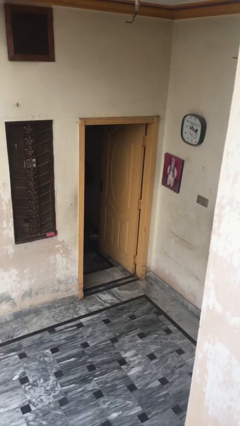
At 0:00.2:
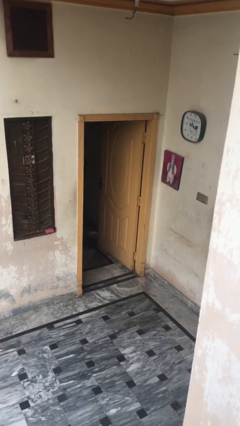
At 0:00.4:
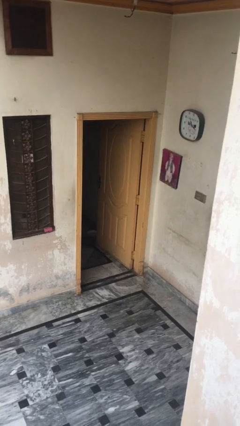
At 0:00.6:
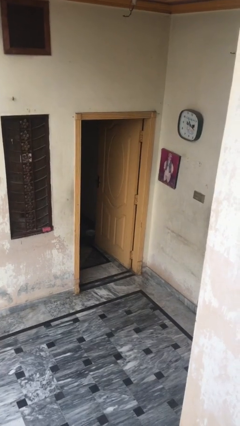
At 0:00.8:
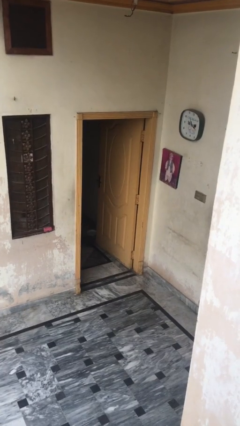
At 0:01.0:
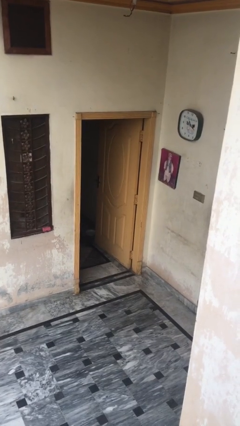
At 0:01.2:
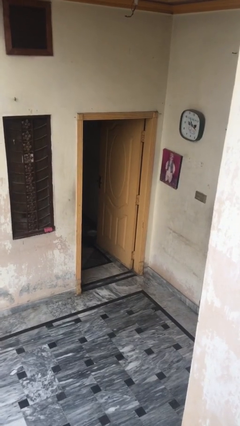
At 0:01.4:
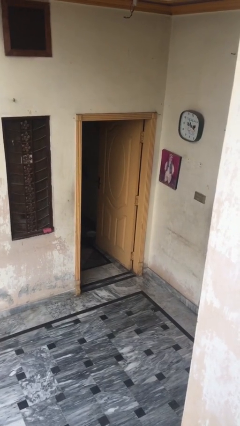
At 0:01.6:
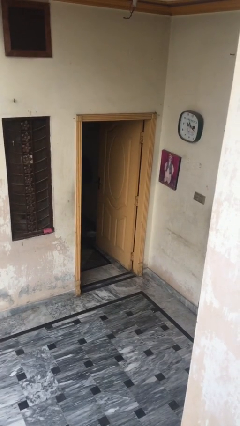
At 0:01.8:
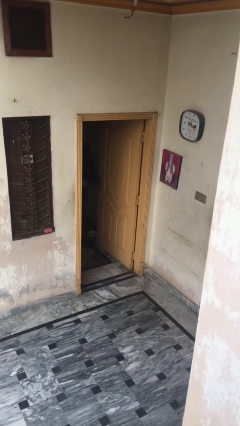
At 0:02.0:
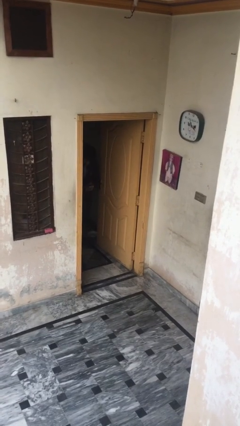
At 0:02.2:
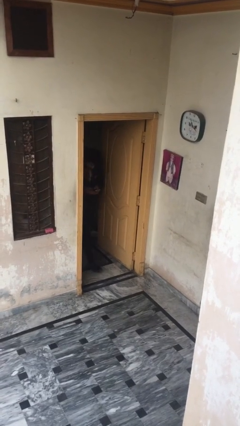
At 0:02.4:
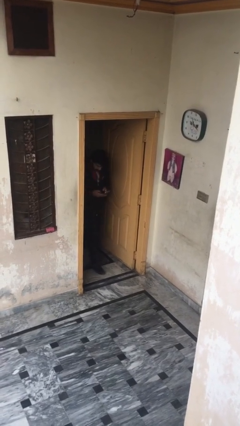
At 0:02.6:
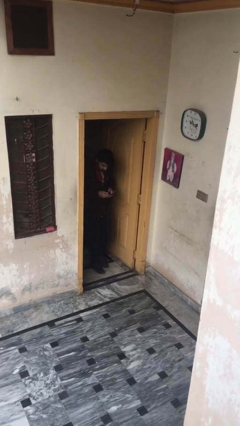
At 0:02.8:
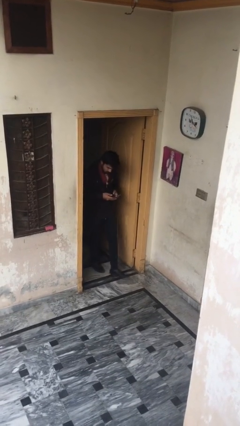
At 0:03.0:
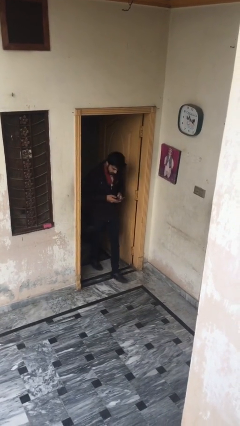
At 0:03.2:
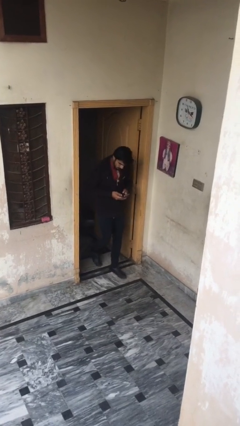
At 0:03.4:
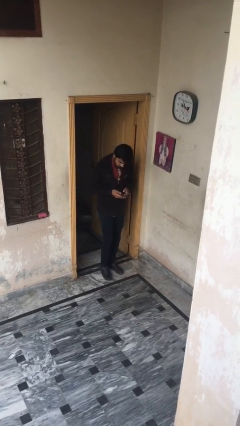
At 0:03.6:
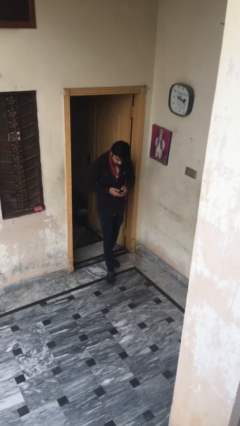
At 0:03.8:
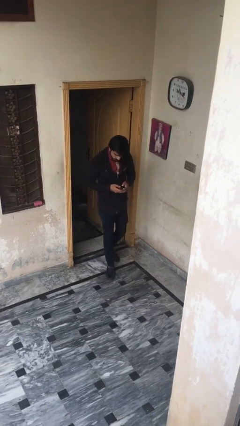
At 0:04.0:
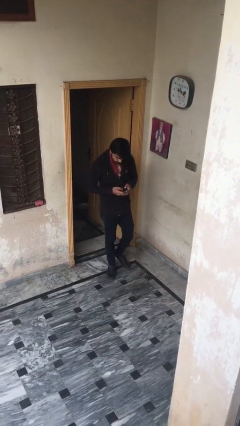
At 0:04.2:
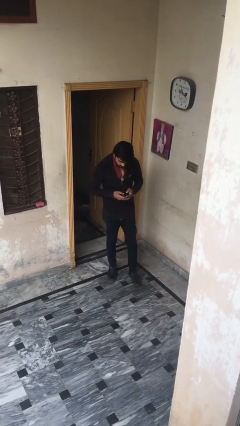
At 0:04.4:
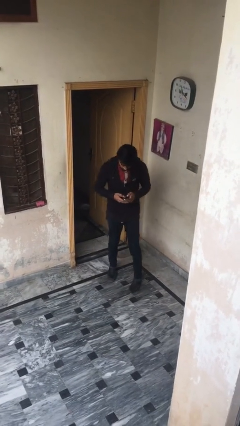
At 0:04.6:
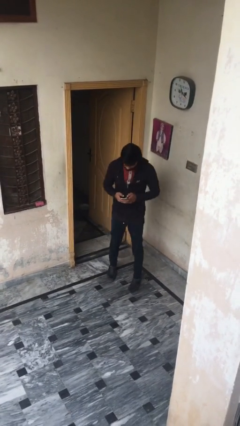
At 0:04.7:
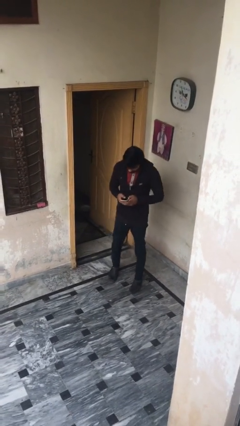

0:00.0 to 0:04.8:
person enters scene through structure

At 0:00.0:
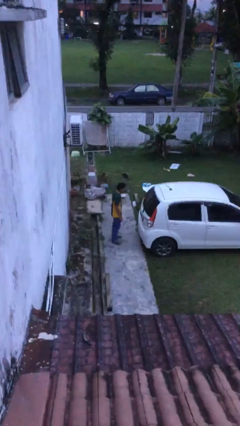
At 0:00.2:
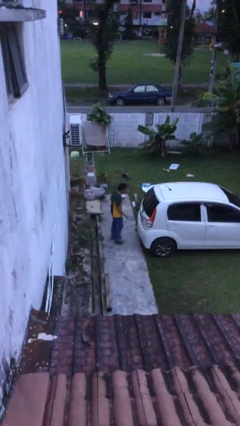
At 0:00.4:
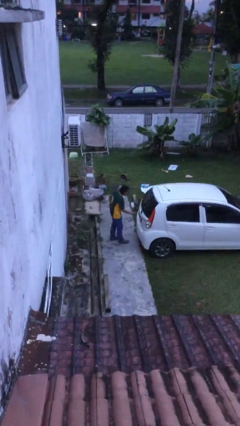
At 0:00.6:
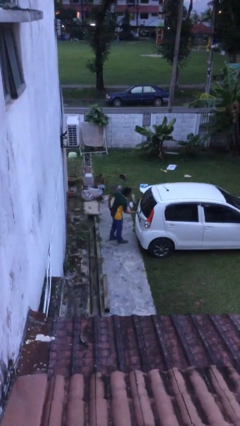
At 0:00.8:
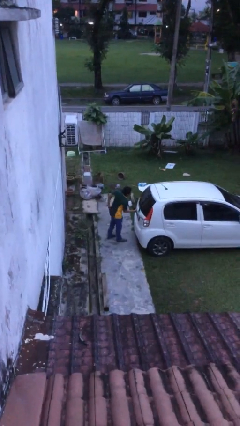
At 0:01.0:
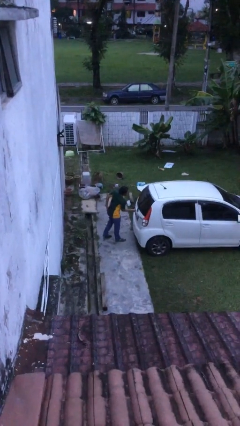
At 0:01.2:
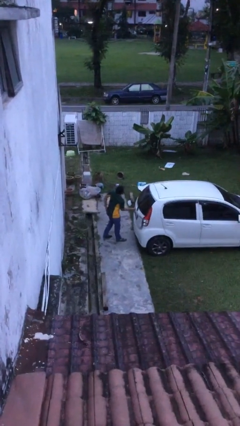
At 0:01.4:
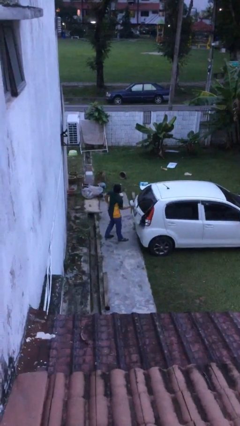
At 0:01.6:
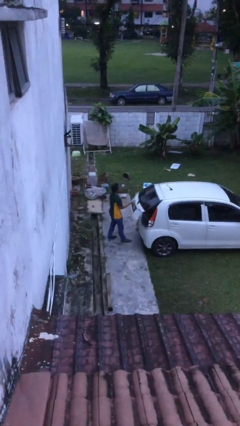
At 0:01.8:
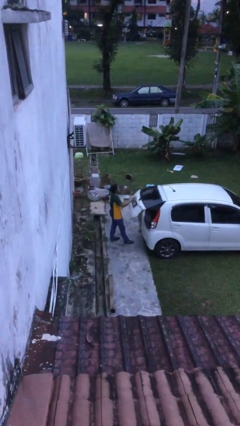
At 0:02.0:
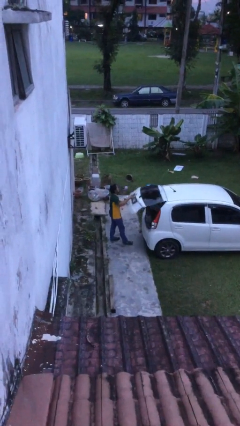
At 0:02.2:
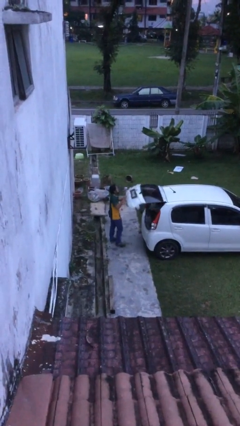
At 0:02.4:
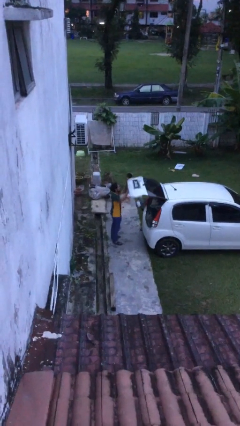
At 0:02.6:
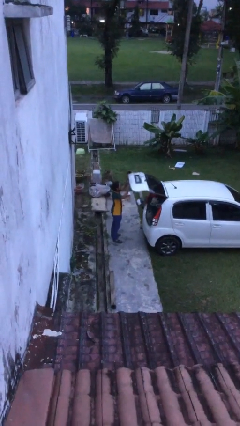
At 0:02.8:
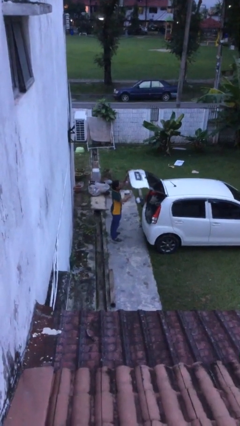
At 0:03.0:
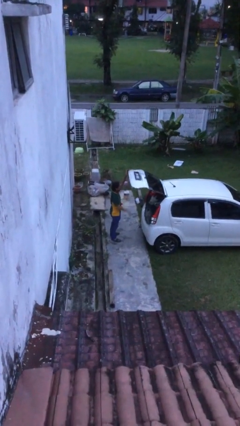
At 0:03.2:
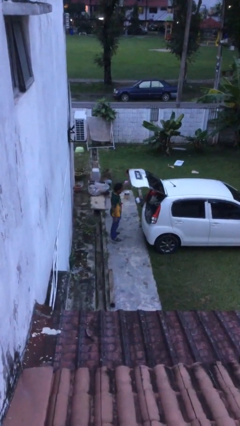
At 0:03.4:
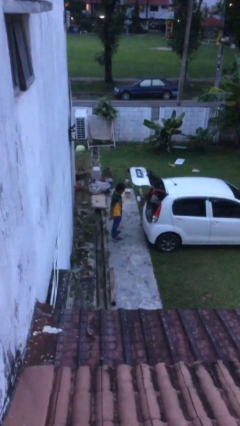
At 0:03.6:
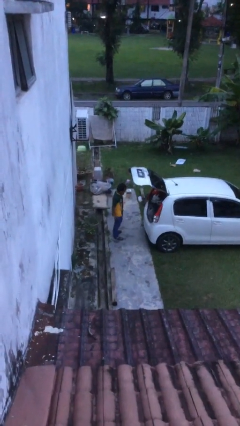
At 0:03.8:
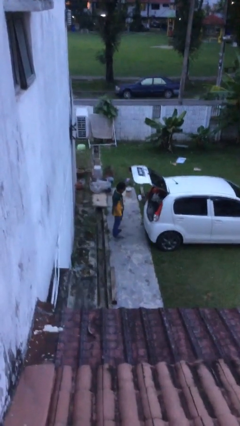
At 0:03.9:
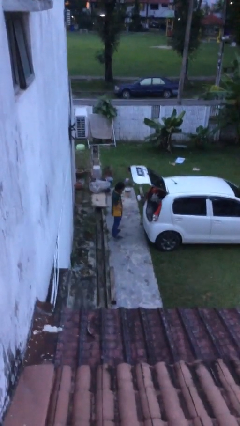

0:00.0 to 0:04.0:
person opens car trunk

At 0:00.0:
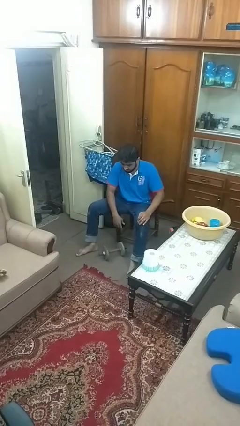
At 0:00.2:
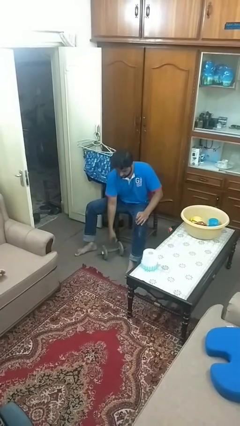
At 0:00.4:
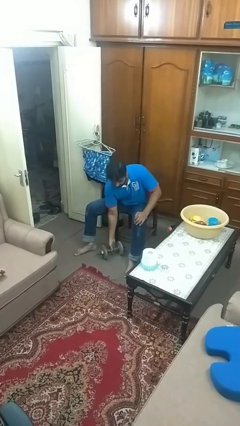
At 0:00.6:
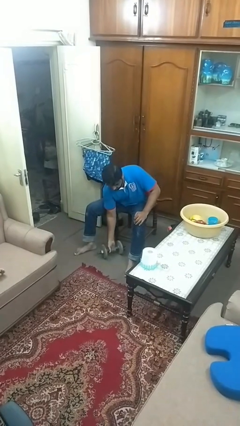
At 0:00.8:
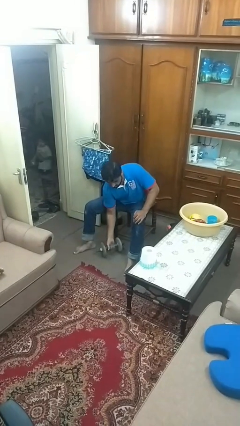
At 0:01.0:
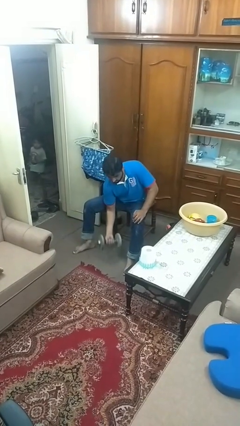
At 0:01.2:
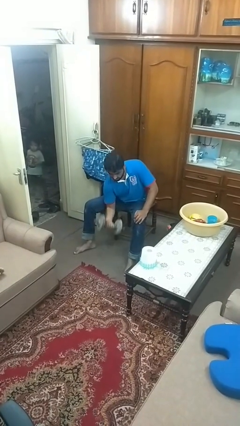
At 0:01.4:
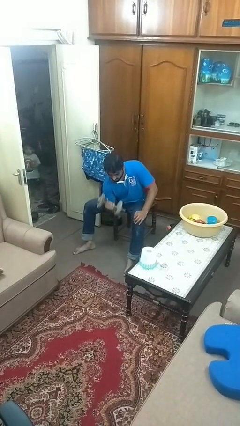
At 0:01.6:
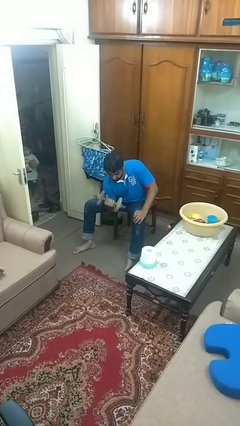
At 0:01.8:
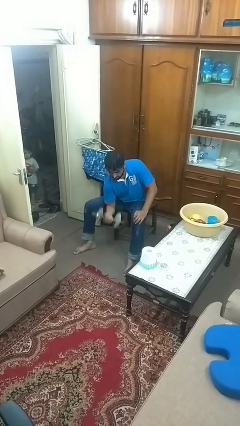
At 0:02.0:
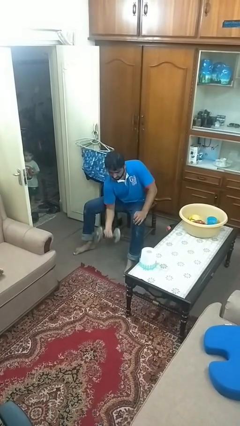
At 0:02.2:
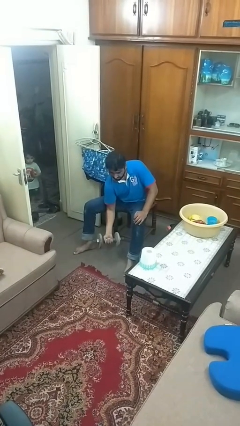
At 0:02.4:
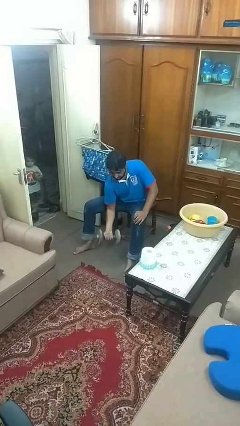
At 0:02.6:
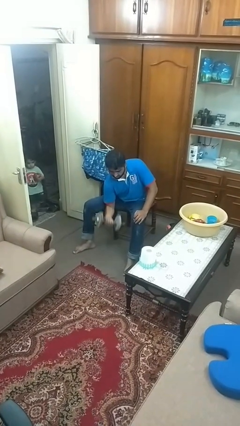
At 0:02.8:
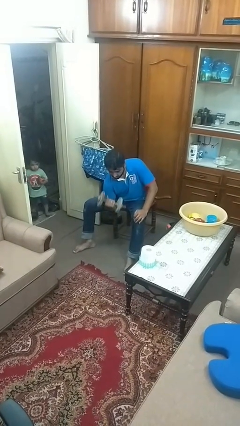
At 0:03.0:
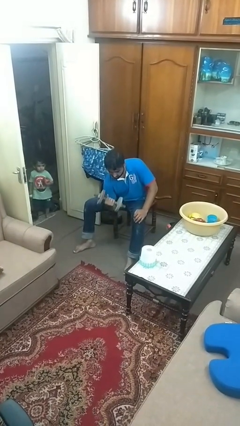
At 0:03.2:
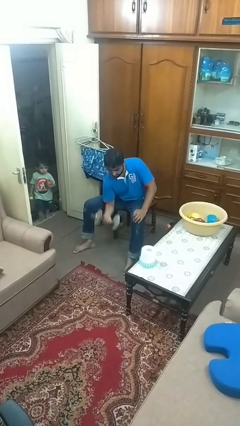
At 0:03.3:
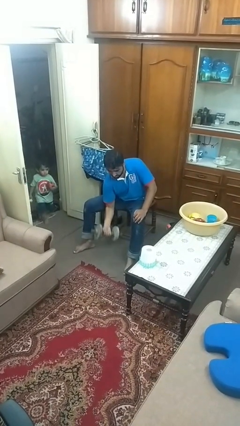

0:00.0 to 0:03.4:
person lifts dumbbells

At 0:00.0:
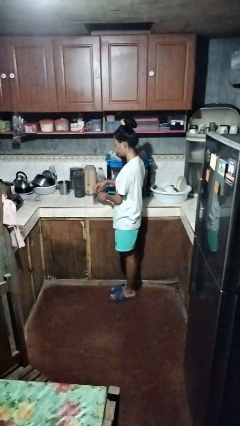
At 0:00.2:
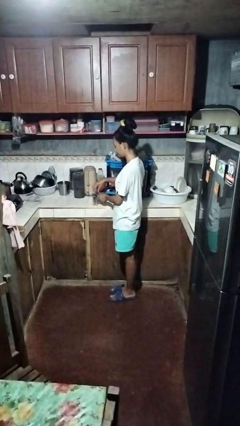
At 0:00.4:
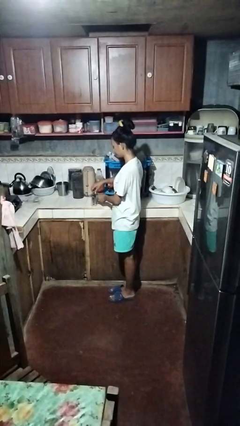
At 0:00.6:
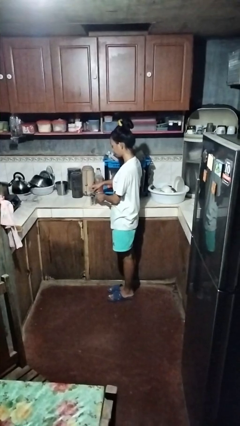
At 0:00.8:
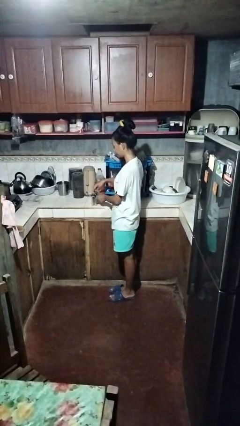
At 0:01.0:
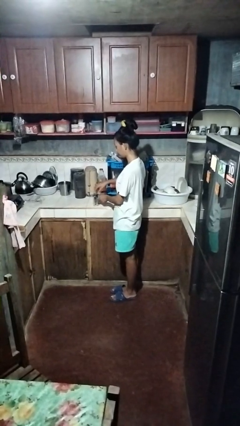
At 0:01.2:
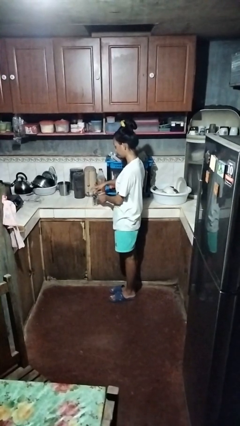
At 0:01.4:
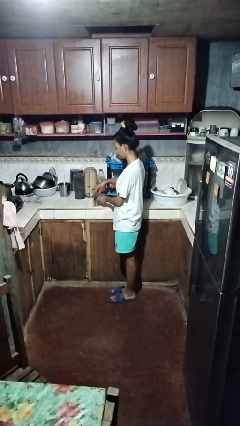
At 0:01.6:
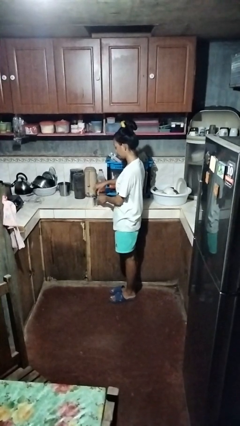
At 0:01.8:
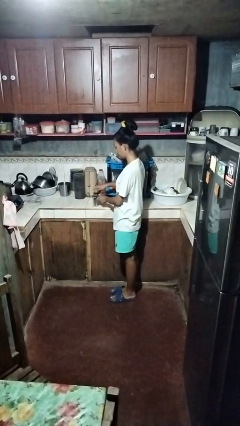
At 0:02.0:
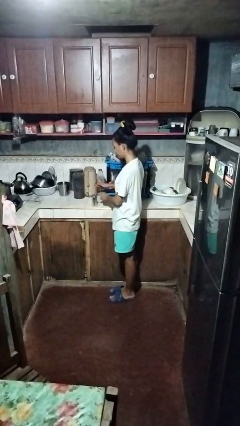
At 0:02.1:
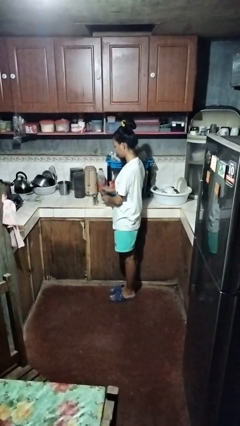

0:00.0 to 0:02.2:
person opens can with can opener

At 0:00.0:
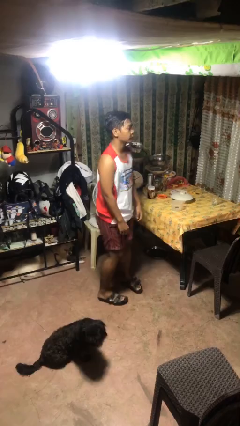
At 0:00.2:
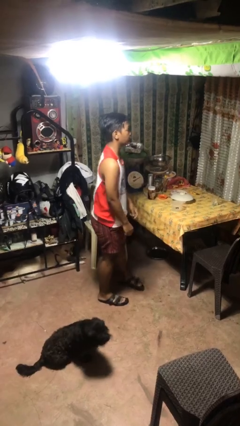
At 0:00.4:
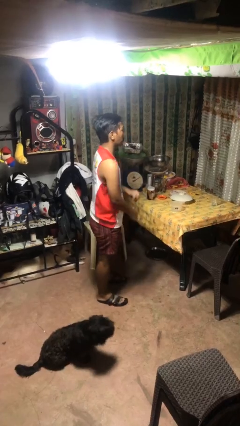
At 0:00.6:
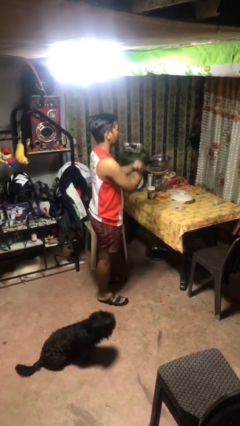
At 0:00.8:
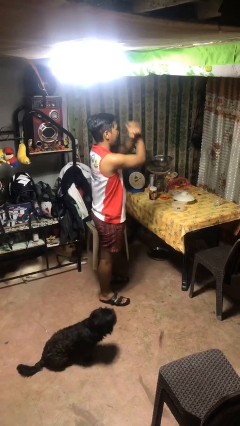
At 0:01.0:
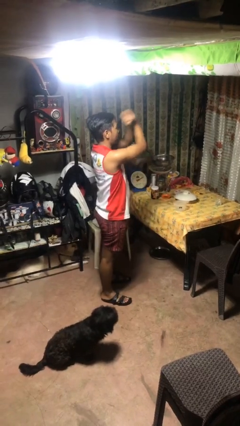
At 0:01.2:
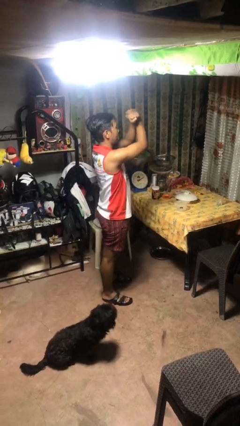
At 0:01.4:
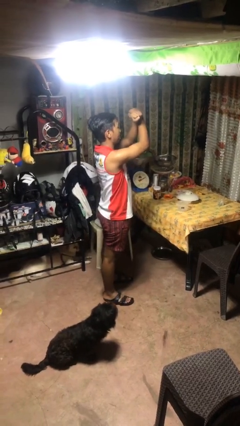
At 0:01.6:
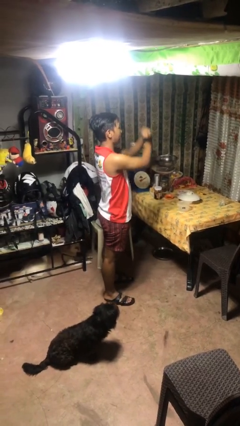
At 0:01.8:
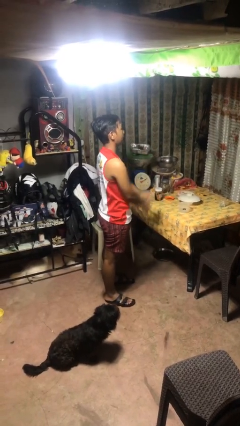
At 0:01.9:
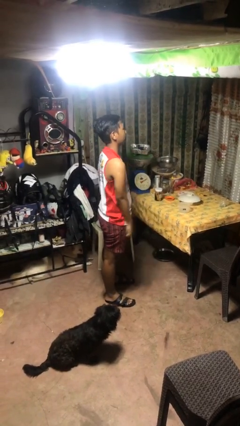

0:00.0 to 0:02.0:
person gestures arms x

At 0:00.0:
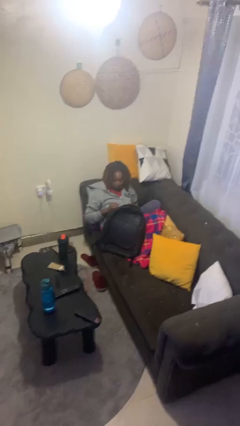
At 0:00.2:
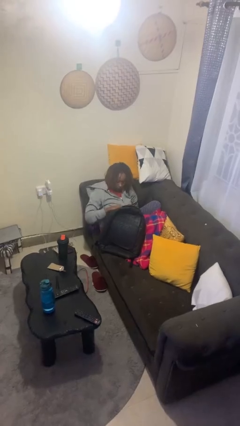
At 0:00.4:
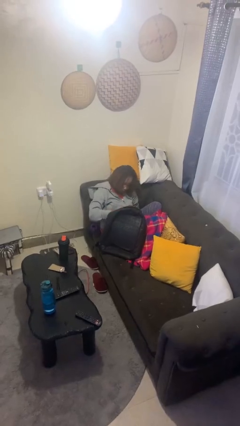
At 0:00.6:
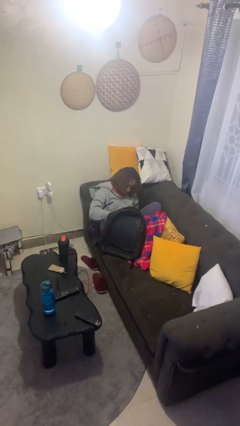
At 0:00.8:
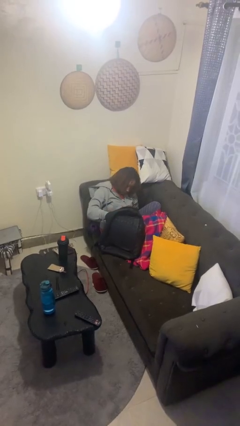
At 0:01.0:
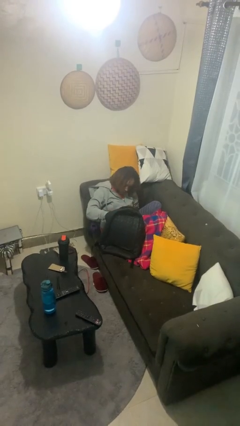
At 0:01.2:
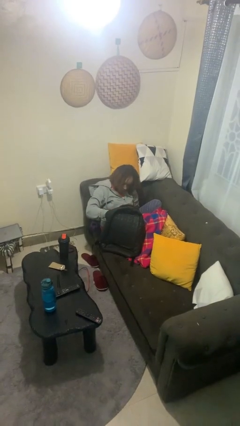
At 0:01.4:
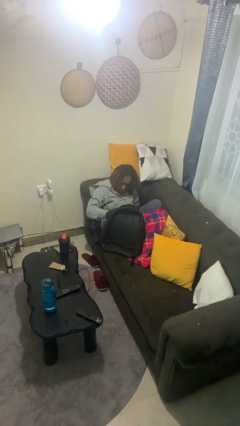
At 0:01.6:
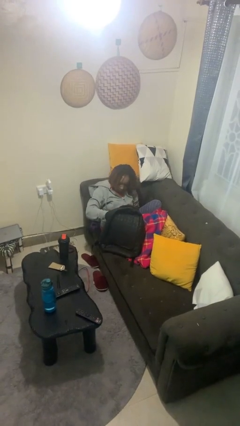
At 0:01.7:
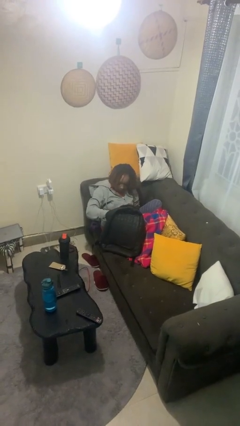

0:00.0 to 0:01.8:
person searches in backpack
